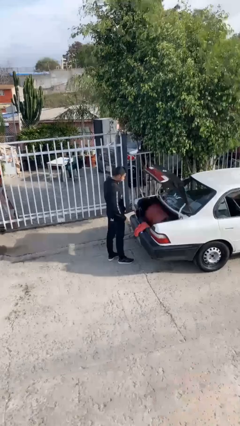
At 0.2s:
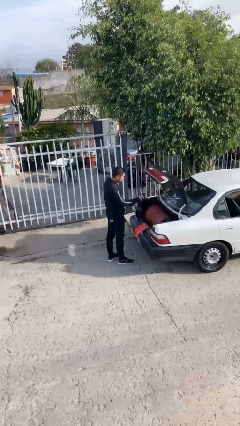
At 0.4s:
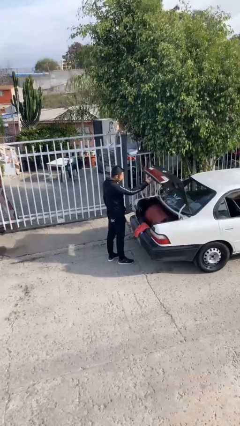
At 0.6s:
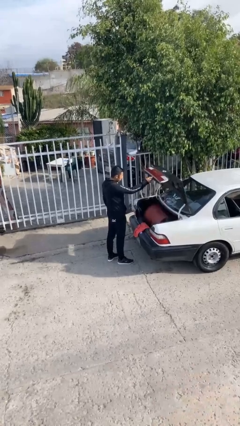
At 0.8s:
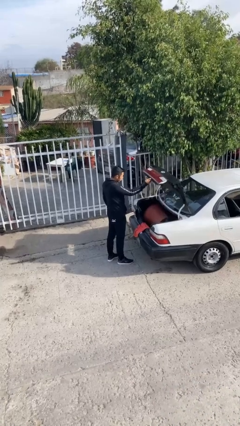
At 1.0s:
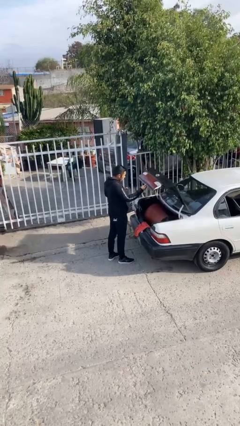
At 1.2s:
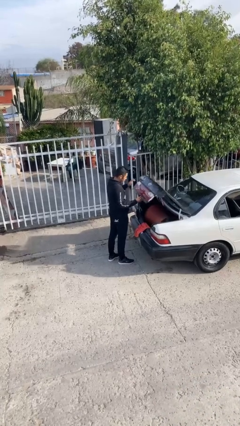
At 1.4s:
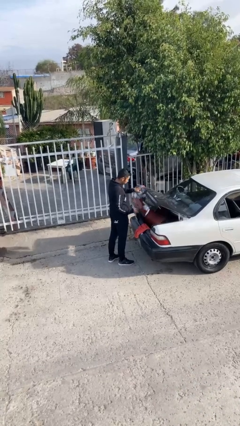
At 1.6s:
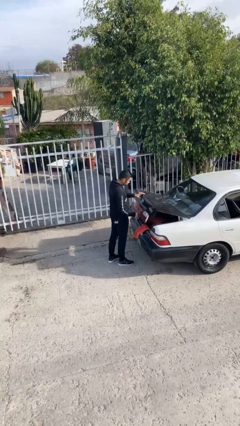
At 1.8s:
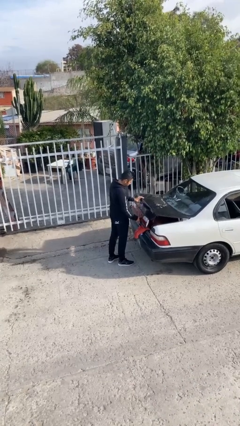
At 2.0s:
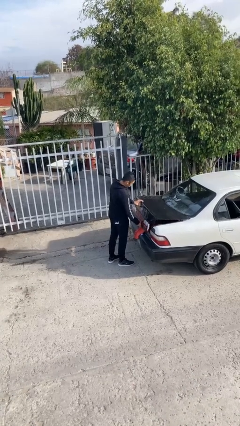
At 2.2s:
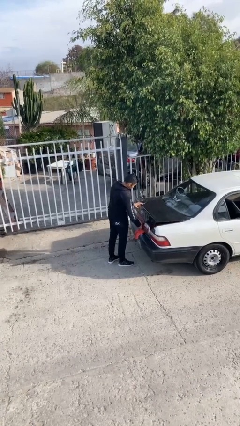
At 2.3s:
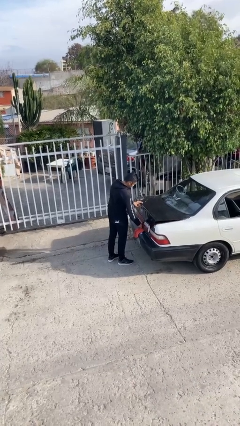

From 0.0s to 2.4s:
person closes car trunk

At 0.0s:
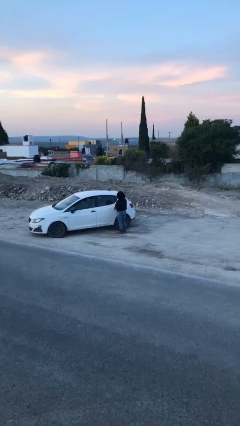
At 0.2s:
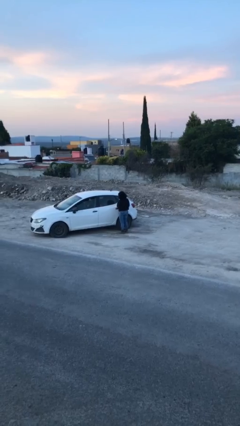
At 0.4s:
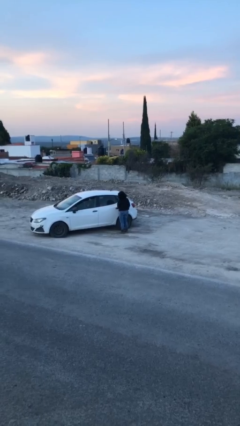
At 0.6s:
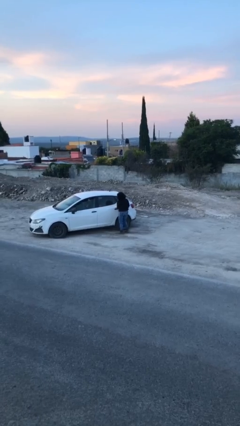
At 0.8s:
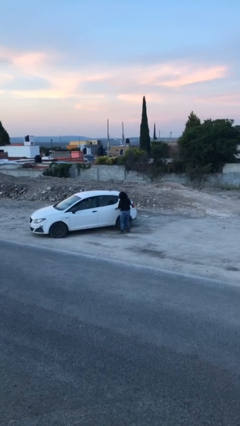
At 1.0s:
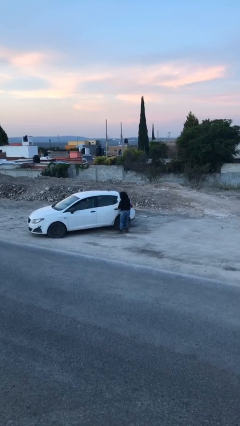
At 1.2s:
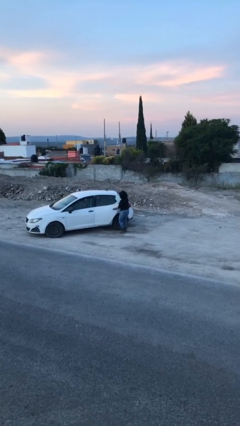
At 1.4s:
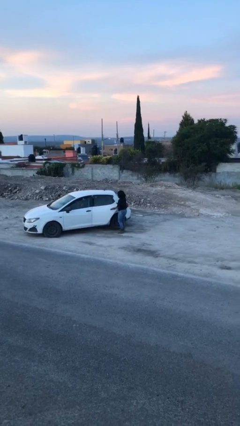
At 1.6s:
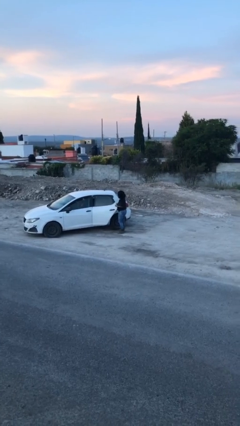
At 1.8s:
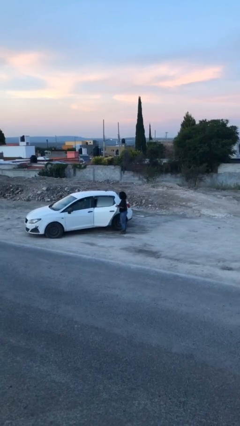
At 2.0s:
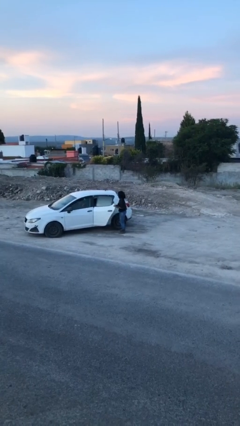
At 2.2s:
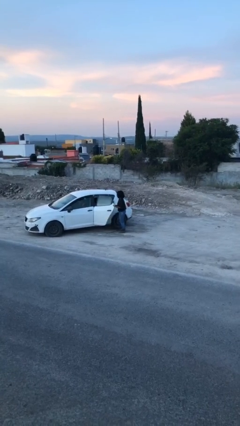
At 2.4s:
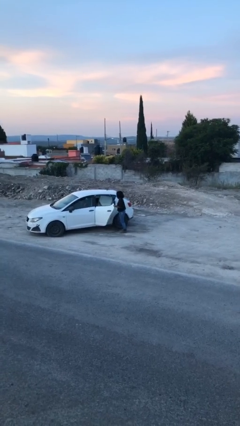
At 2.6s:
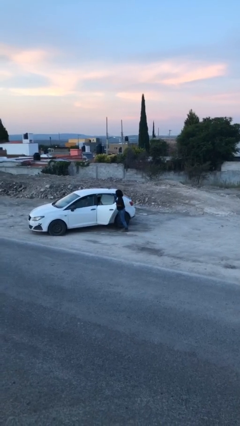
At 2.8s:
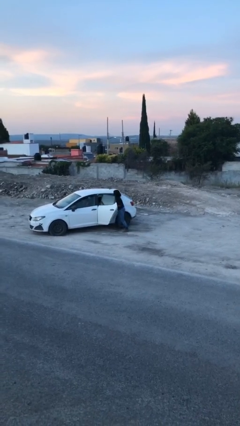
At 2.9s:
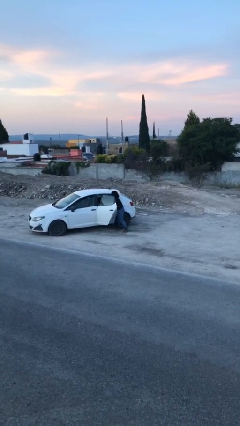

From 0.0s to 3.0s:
person opens car door

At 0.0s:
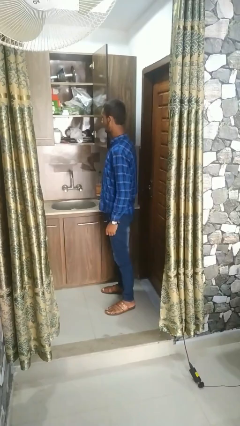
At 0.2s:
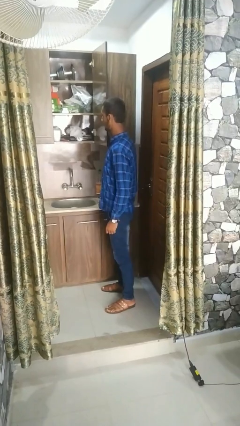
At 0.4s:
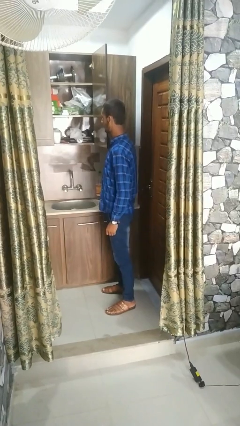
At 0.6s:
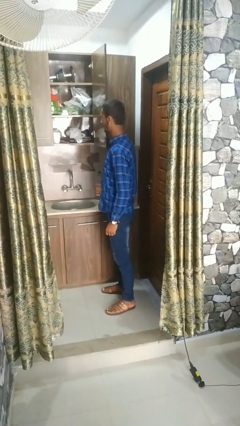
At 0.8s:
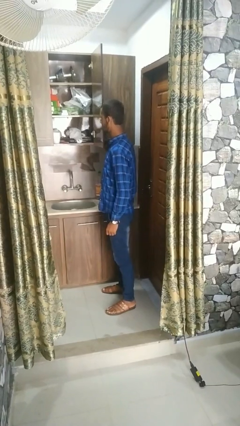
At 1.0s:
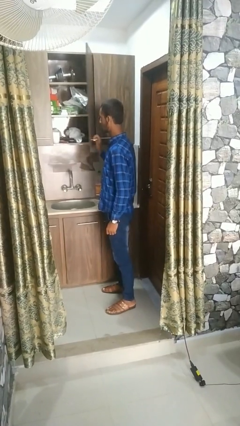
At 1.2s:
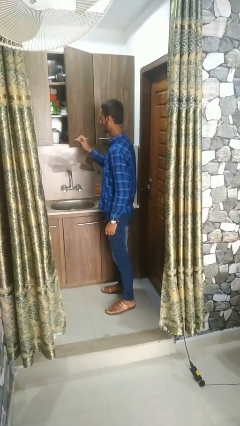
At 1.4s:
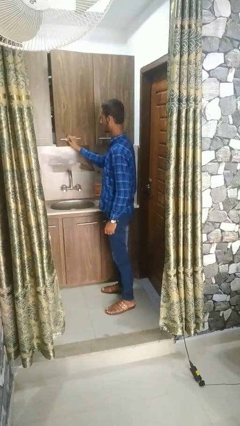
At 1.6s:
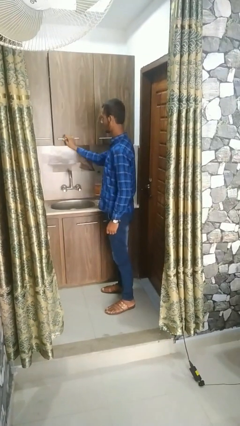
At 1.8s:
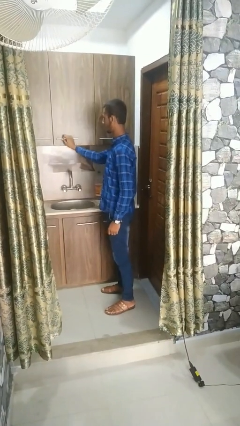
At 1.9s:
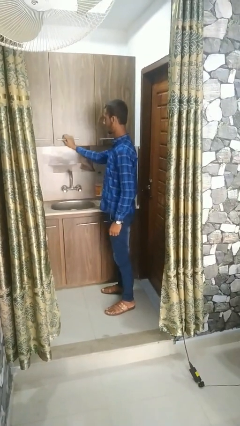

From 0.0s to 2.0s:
person closes cabinet

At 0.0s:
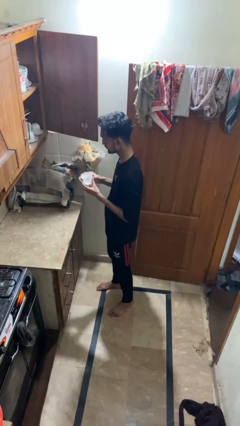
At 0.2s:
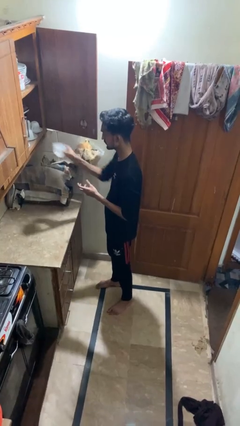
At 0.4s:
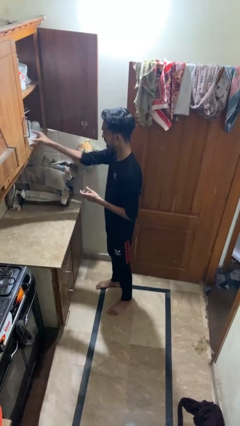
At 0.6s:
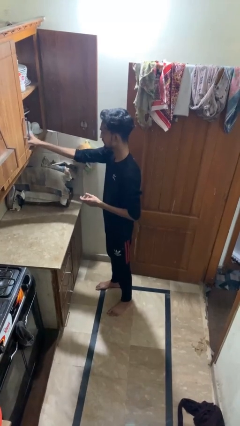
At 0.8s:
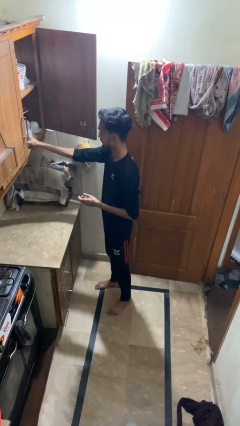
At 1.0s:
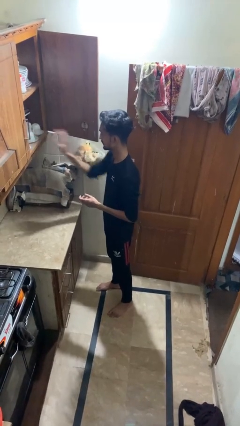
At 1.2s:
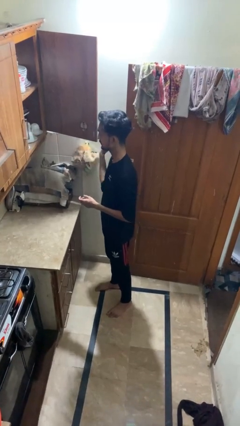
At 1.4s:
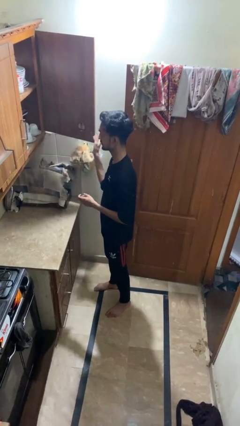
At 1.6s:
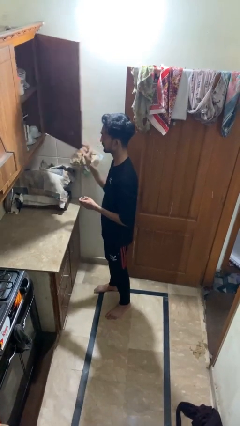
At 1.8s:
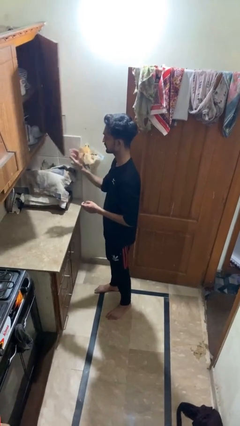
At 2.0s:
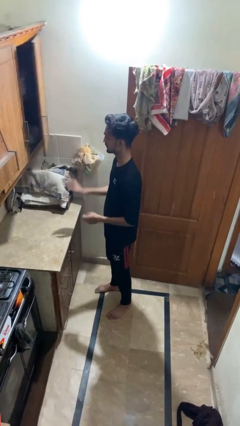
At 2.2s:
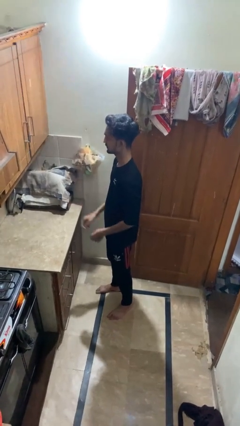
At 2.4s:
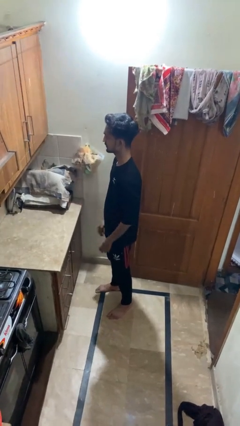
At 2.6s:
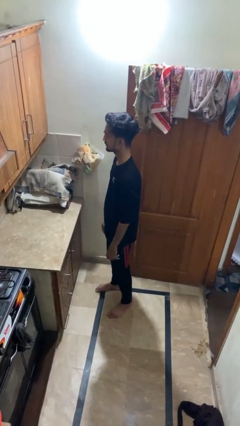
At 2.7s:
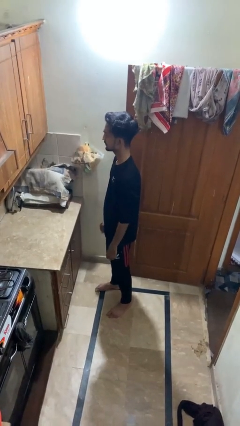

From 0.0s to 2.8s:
person takes object from cabinet

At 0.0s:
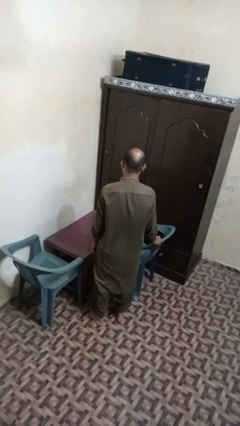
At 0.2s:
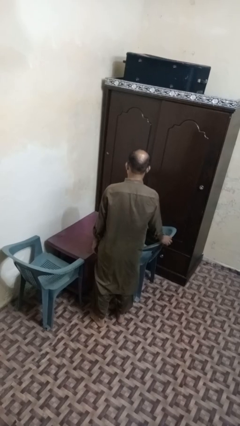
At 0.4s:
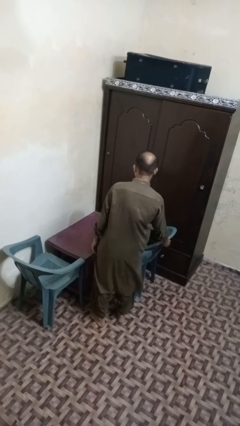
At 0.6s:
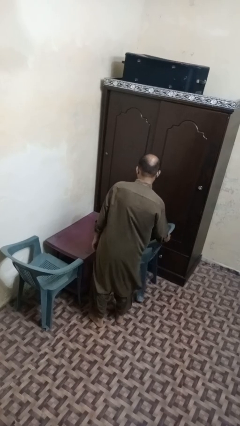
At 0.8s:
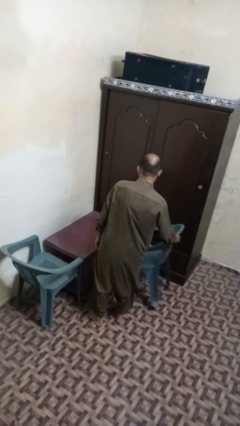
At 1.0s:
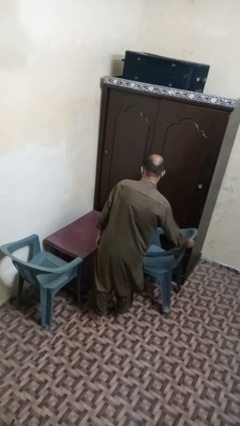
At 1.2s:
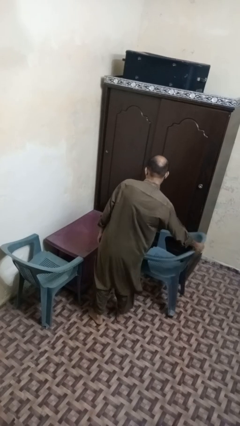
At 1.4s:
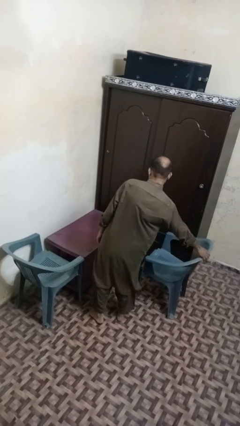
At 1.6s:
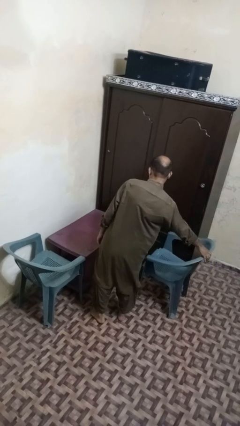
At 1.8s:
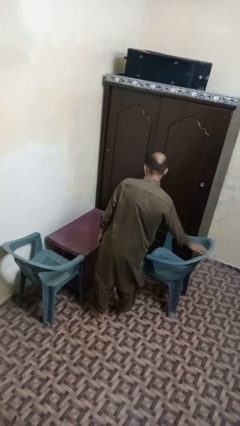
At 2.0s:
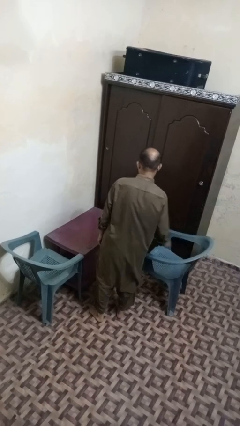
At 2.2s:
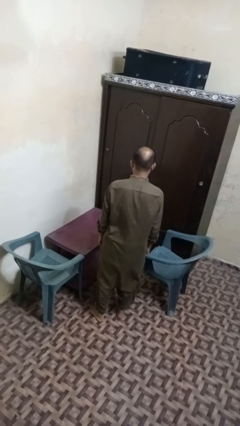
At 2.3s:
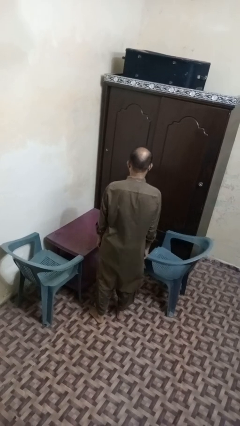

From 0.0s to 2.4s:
person pulls out chair

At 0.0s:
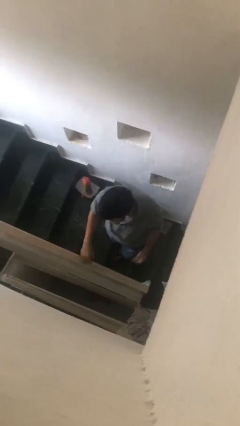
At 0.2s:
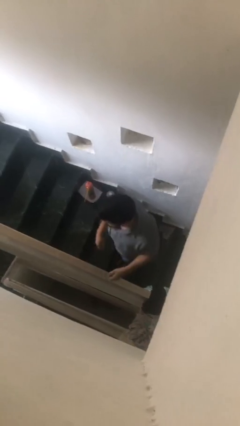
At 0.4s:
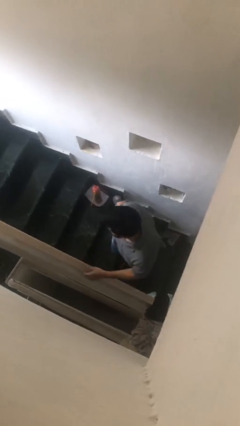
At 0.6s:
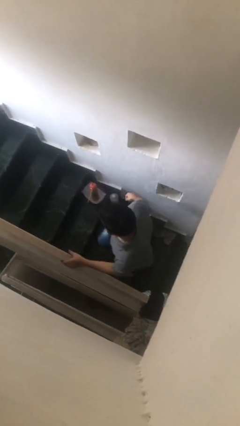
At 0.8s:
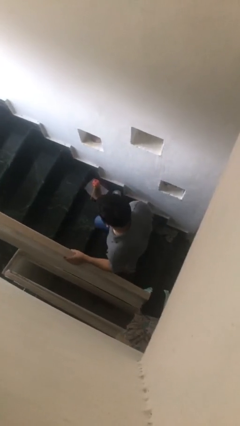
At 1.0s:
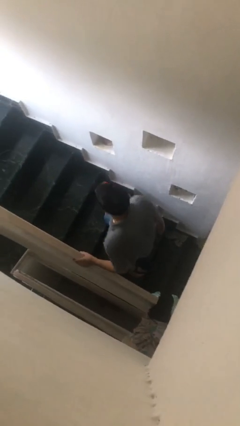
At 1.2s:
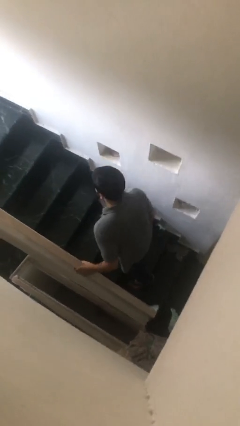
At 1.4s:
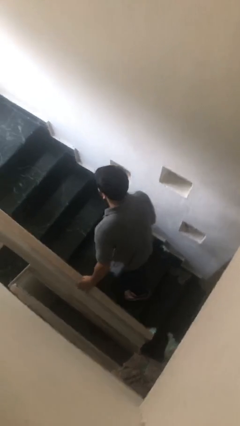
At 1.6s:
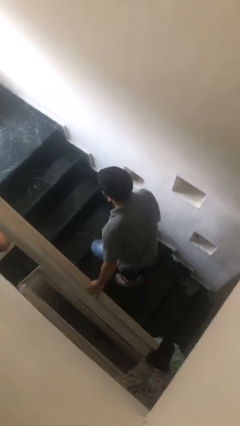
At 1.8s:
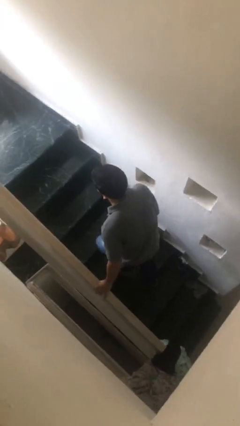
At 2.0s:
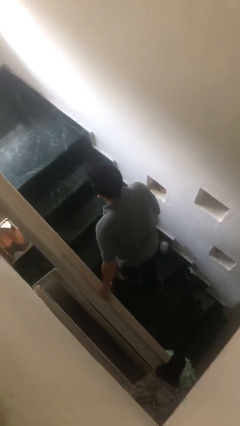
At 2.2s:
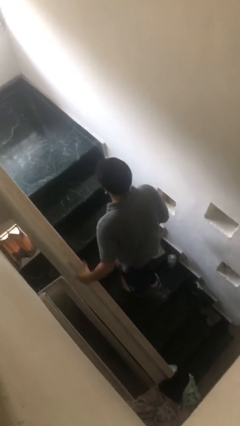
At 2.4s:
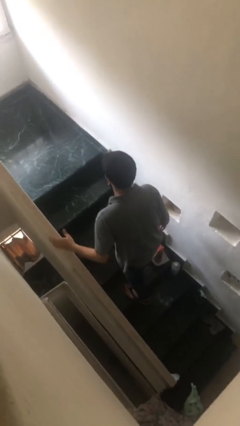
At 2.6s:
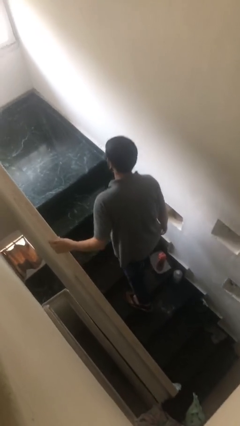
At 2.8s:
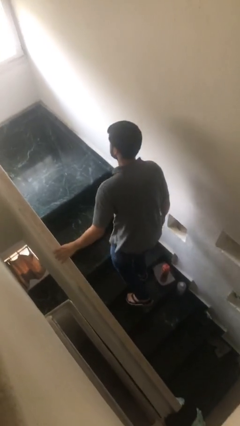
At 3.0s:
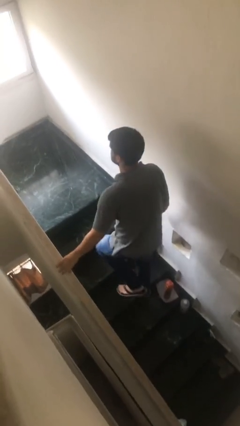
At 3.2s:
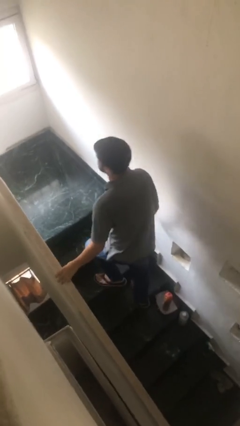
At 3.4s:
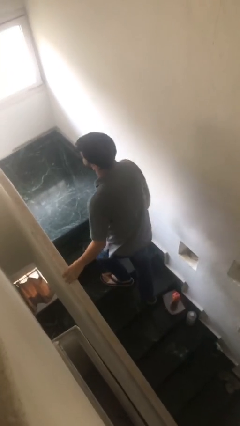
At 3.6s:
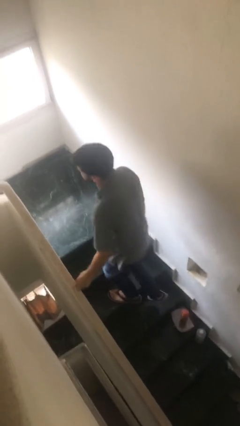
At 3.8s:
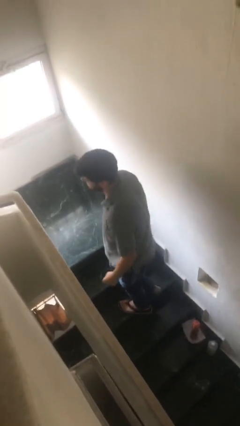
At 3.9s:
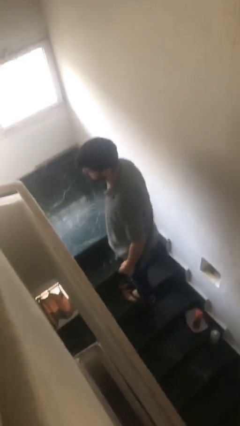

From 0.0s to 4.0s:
person climbs up stairs

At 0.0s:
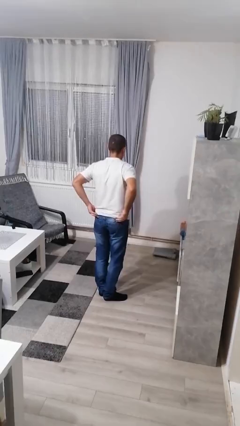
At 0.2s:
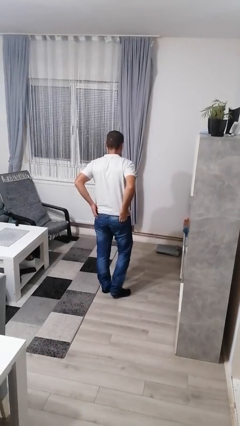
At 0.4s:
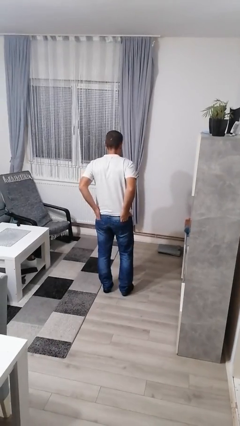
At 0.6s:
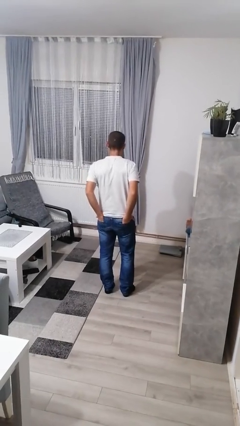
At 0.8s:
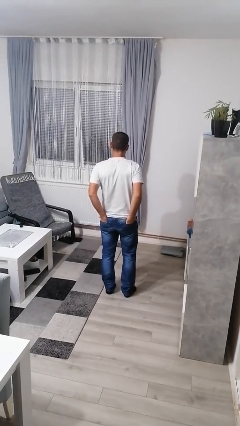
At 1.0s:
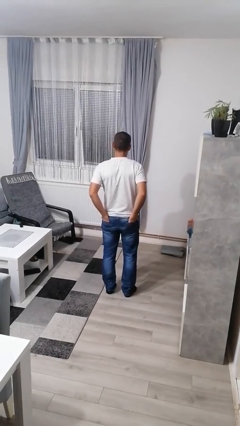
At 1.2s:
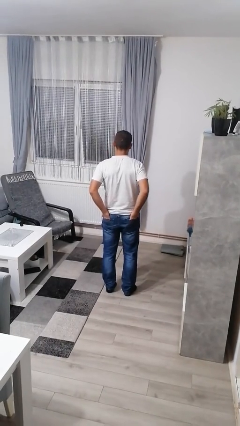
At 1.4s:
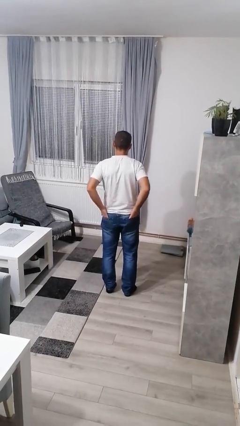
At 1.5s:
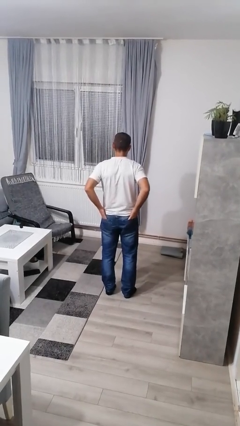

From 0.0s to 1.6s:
person puts hands in back pockets
